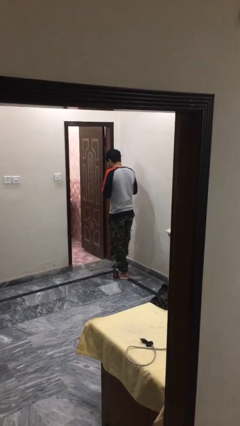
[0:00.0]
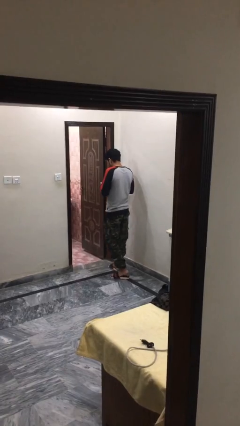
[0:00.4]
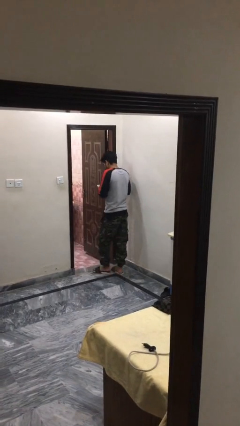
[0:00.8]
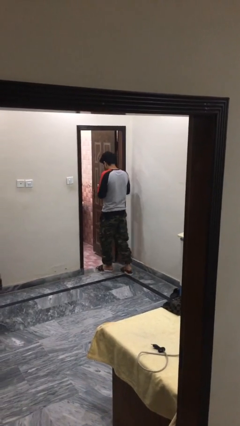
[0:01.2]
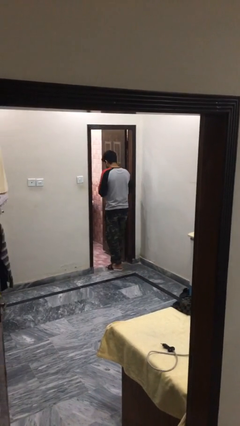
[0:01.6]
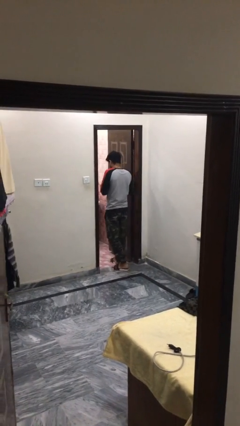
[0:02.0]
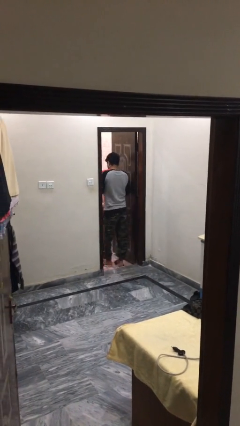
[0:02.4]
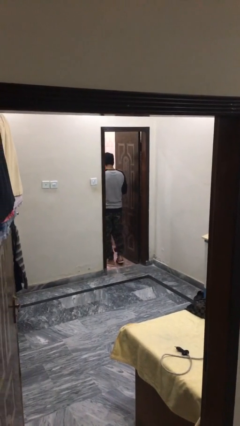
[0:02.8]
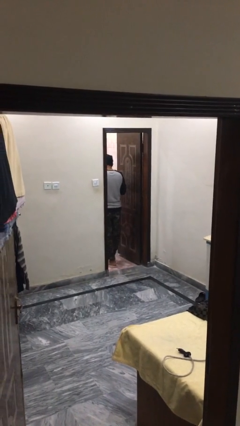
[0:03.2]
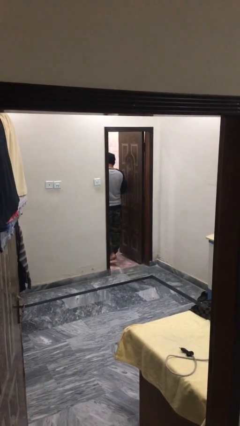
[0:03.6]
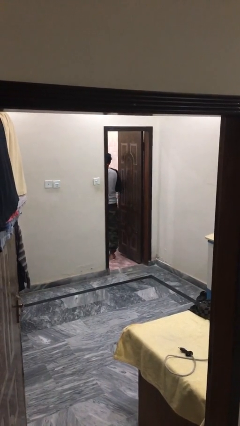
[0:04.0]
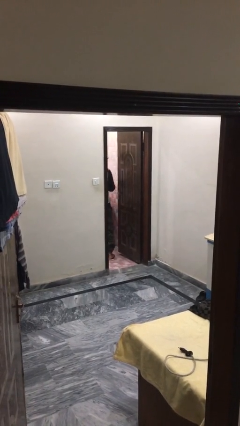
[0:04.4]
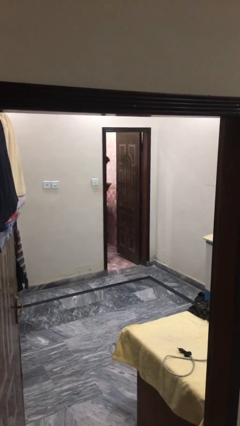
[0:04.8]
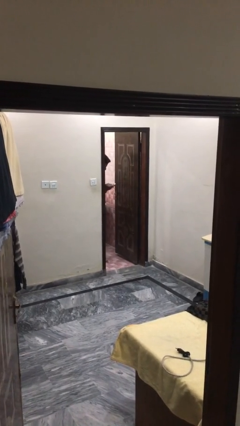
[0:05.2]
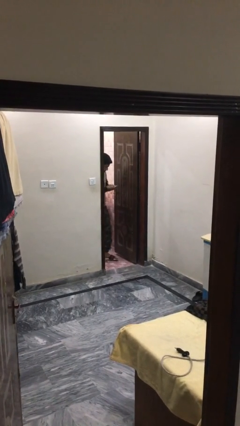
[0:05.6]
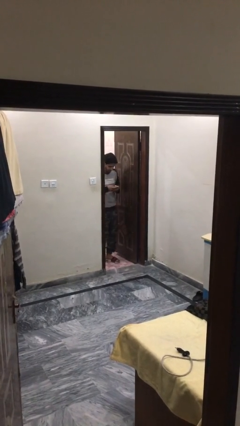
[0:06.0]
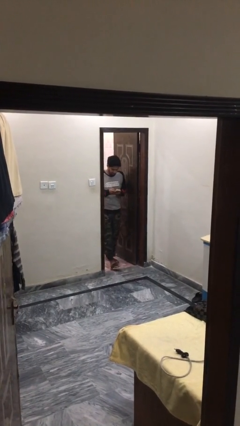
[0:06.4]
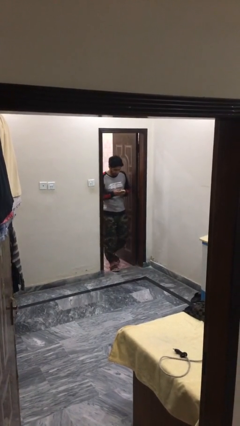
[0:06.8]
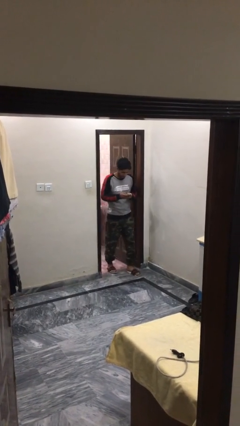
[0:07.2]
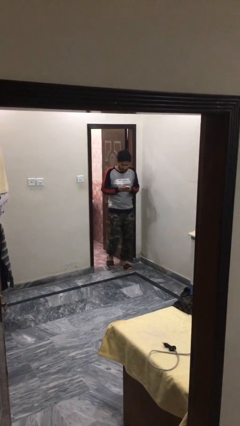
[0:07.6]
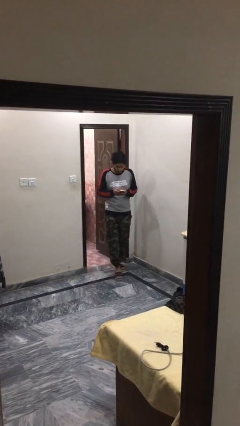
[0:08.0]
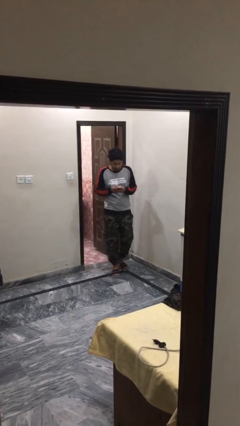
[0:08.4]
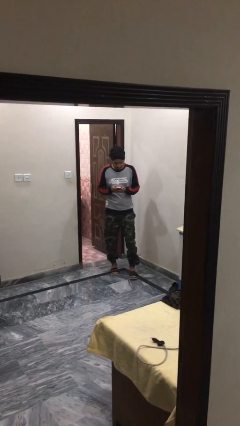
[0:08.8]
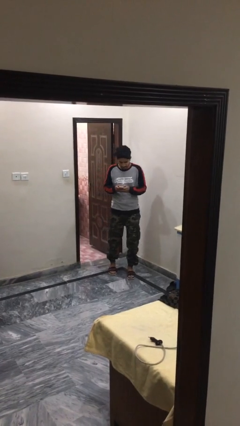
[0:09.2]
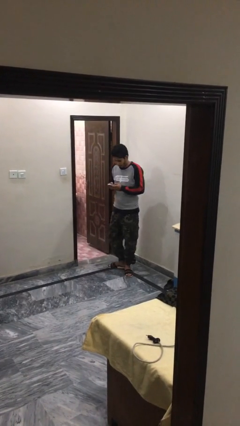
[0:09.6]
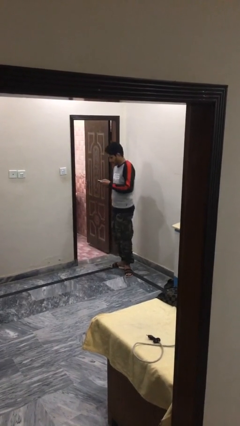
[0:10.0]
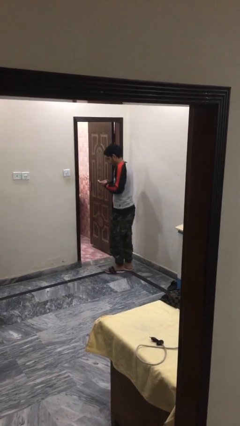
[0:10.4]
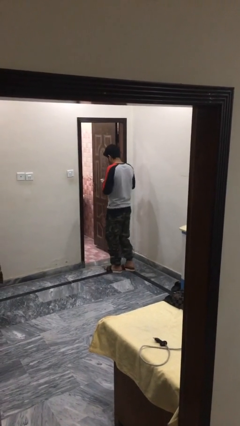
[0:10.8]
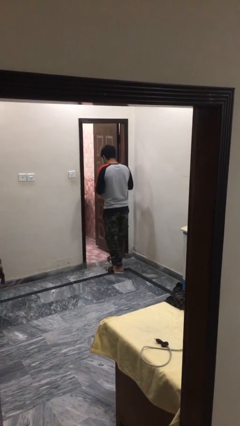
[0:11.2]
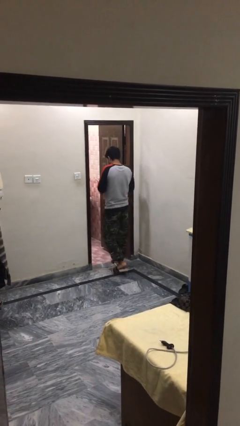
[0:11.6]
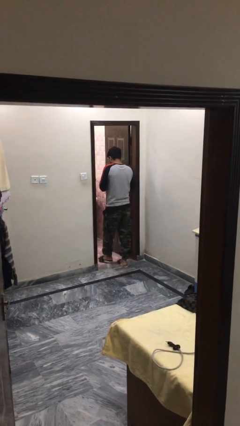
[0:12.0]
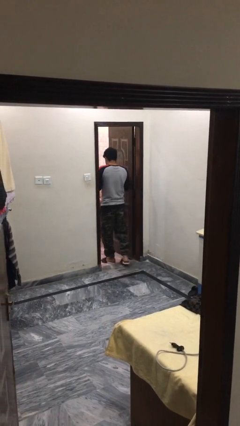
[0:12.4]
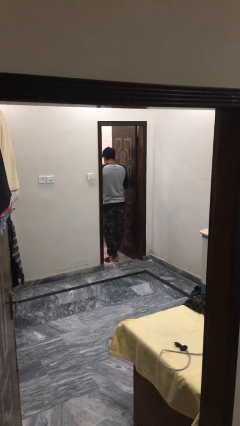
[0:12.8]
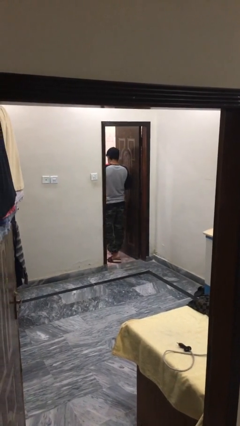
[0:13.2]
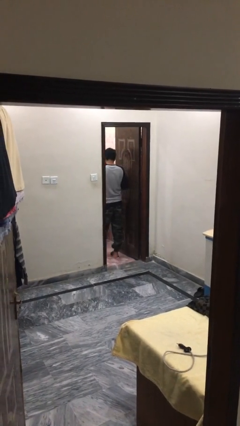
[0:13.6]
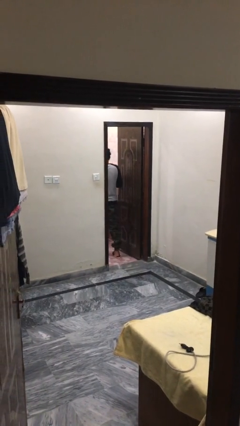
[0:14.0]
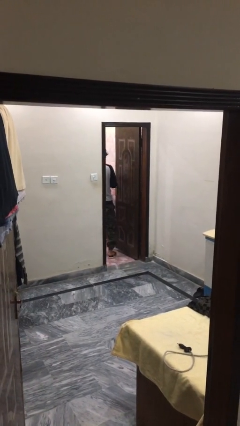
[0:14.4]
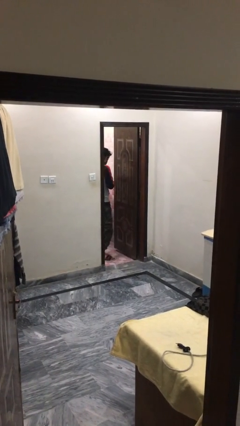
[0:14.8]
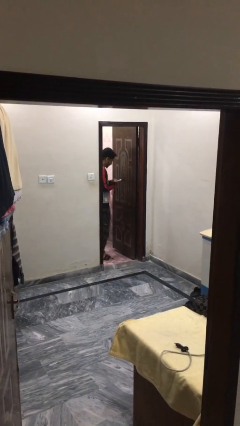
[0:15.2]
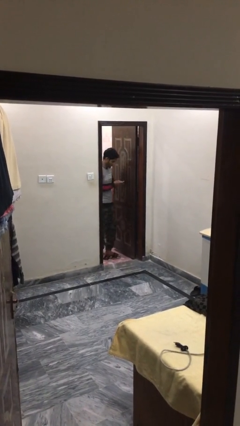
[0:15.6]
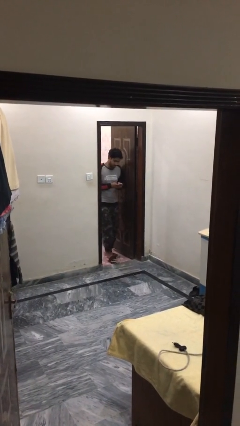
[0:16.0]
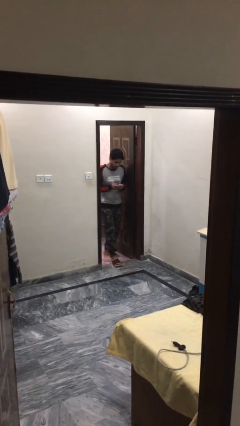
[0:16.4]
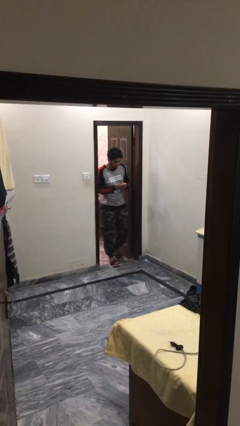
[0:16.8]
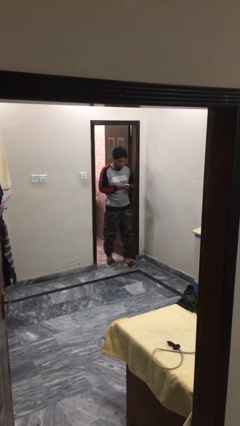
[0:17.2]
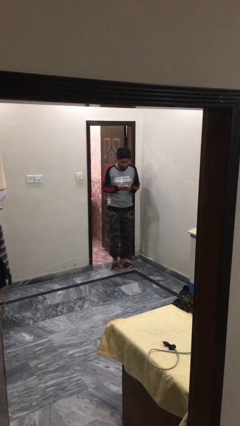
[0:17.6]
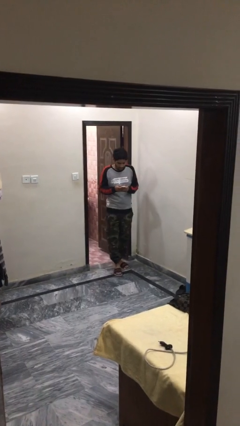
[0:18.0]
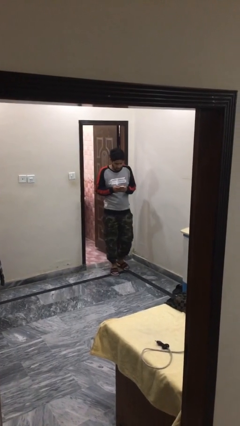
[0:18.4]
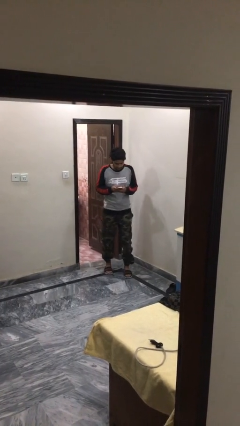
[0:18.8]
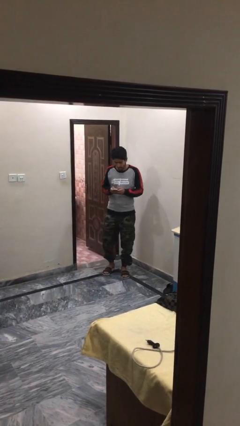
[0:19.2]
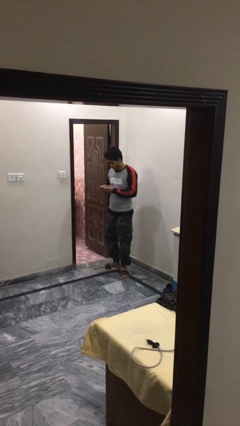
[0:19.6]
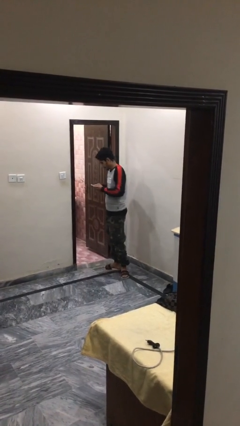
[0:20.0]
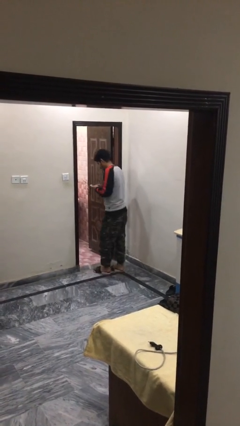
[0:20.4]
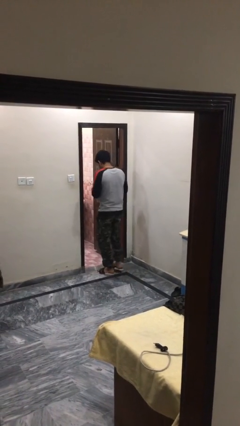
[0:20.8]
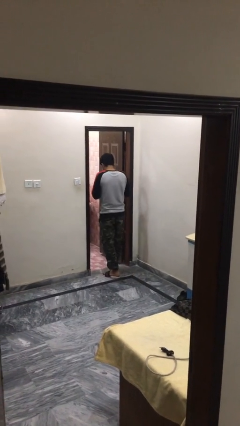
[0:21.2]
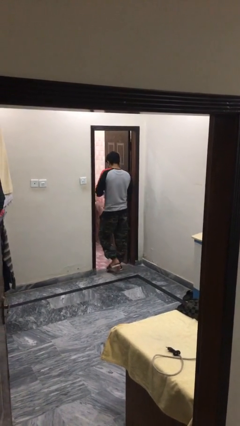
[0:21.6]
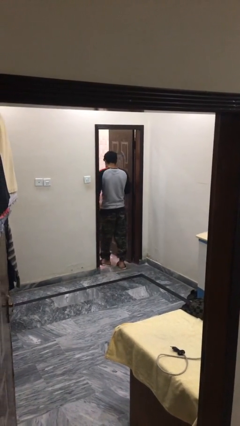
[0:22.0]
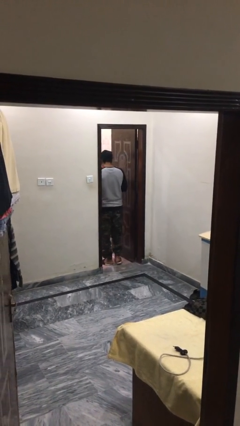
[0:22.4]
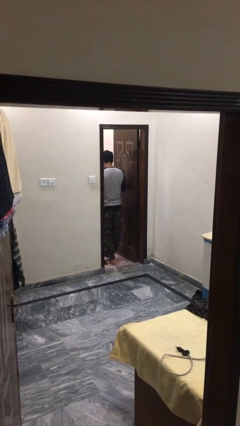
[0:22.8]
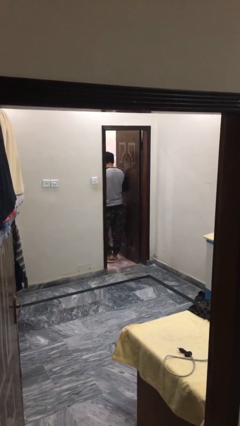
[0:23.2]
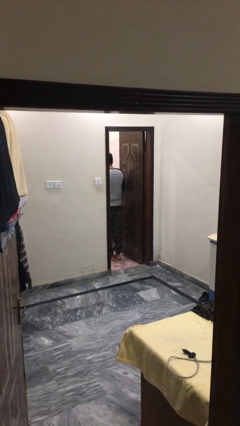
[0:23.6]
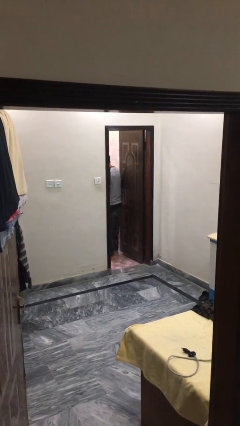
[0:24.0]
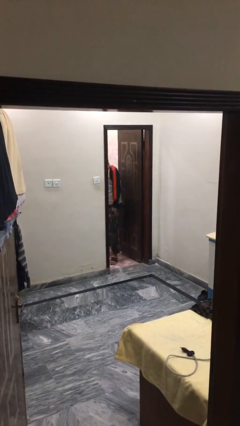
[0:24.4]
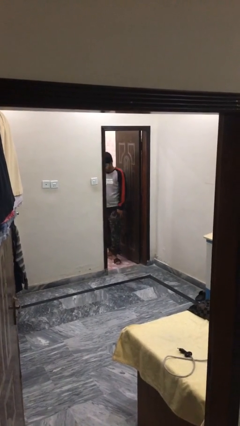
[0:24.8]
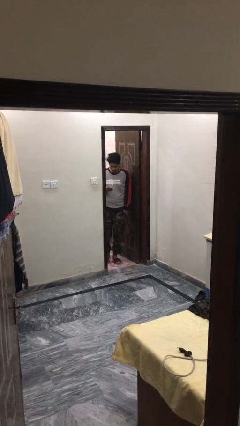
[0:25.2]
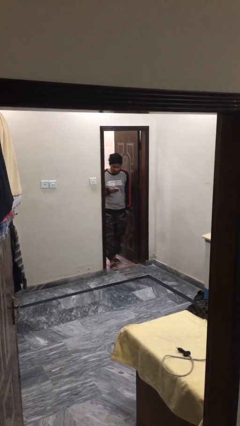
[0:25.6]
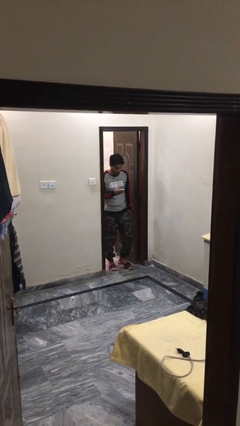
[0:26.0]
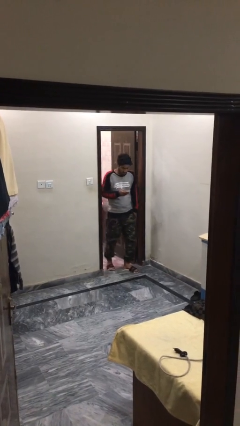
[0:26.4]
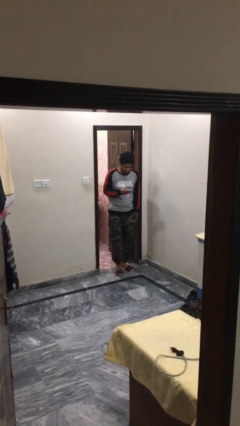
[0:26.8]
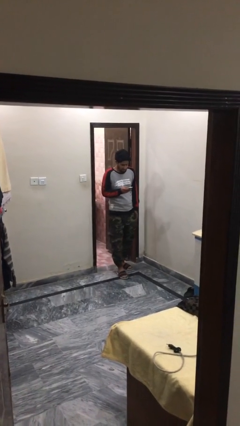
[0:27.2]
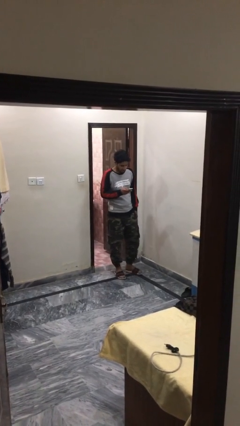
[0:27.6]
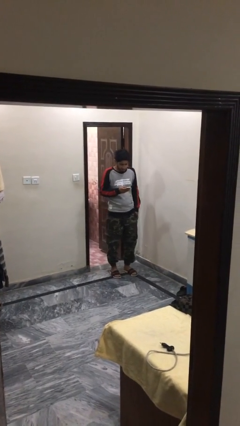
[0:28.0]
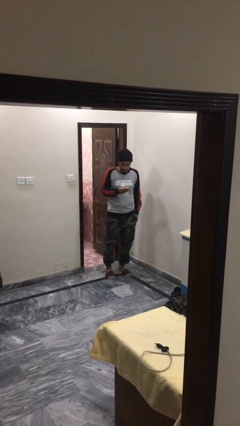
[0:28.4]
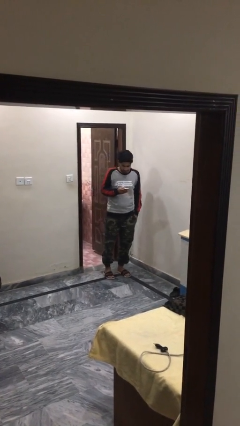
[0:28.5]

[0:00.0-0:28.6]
person texts on phone

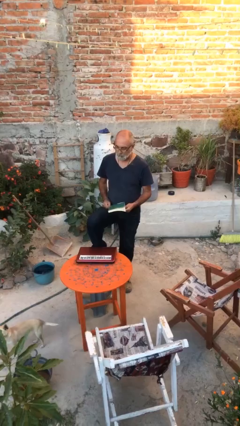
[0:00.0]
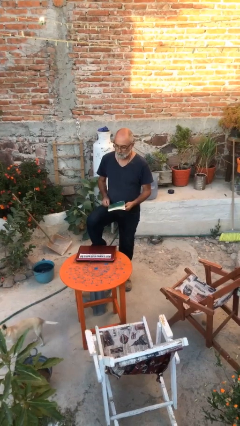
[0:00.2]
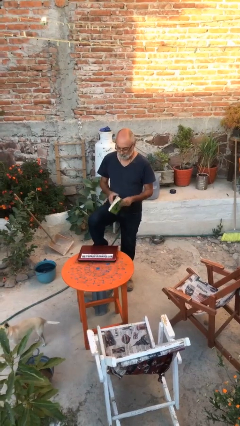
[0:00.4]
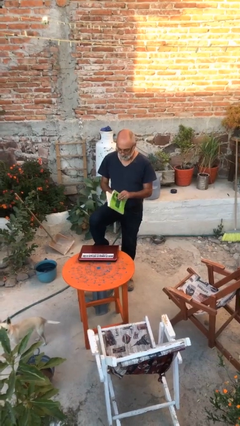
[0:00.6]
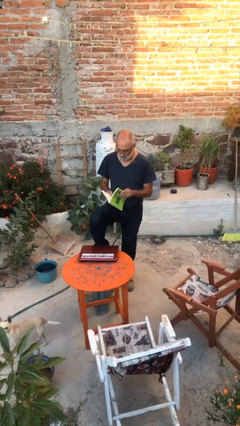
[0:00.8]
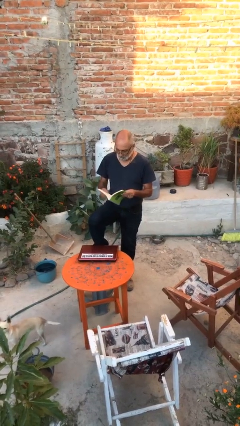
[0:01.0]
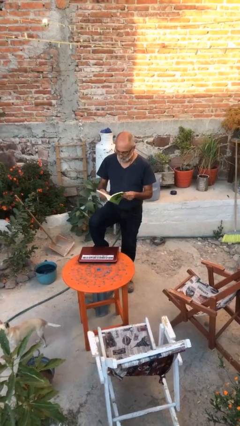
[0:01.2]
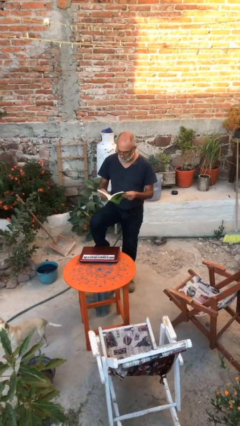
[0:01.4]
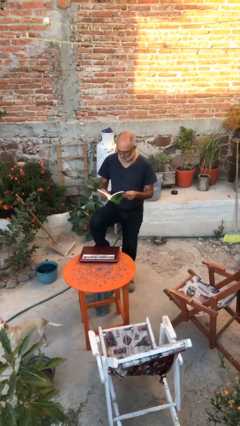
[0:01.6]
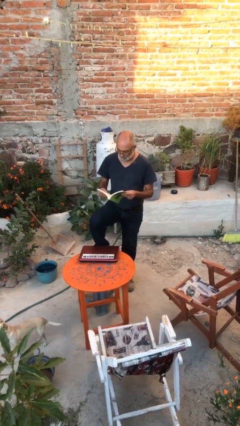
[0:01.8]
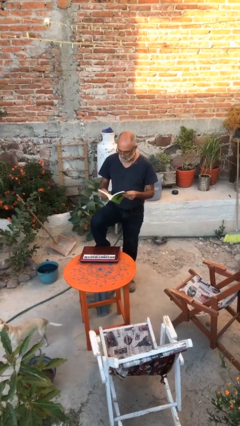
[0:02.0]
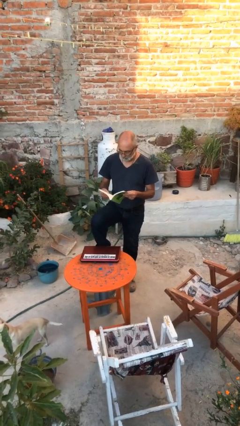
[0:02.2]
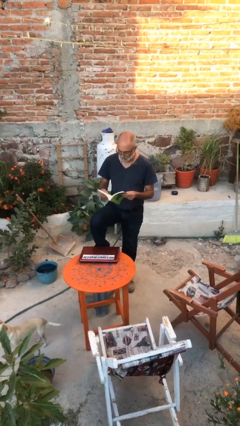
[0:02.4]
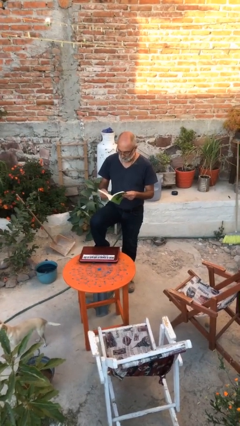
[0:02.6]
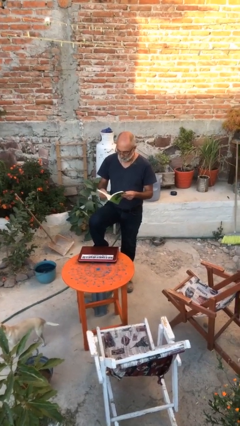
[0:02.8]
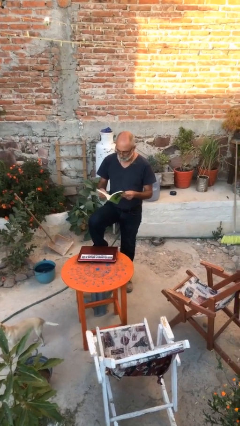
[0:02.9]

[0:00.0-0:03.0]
person reads document

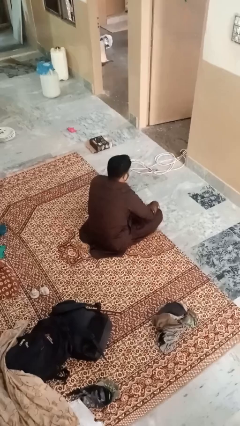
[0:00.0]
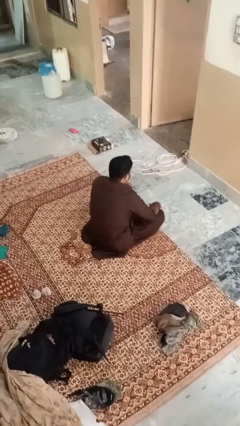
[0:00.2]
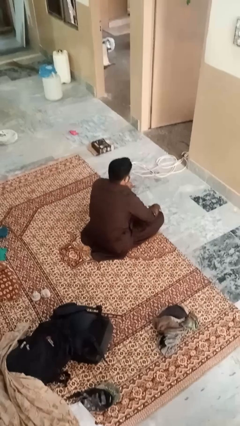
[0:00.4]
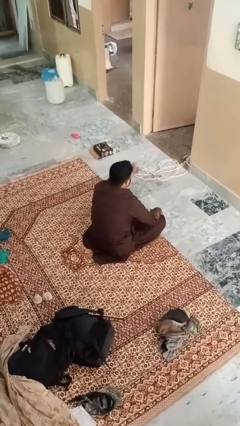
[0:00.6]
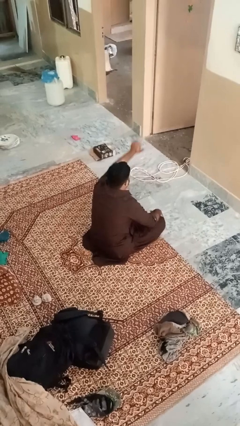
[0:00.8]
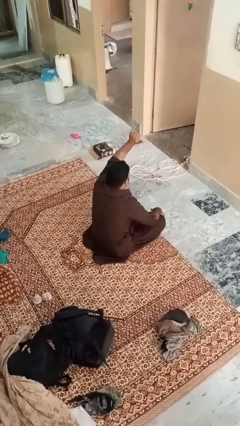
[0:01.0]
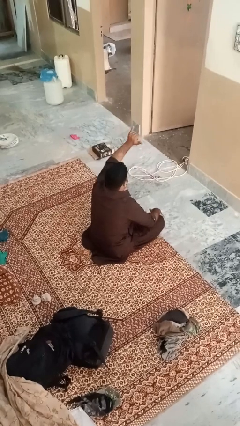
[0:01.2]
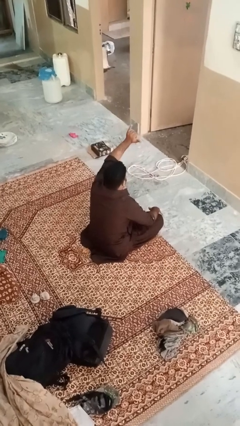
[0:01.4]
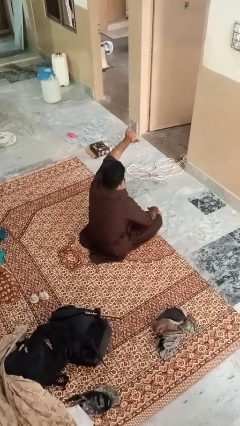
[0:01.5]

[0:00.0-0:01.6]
person gestures hang loose
